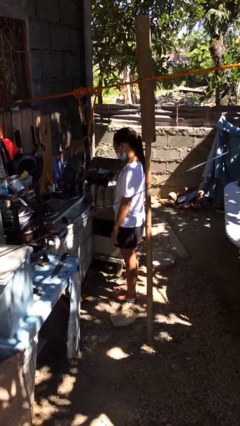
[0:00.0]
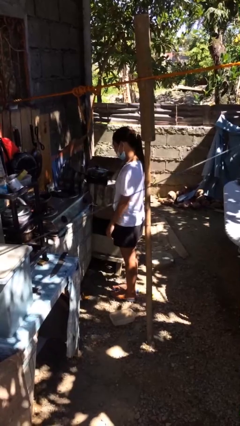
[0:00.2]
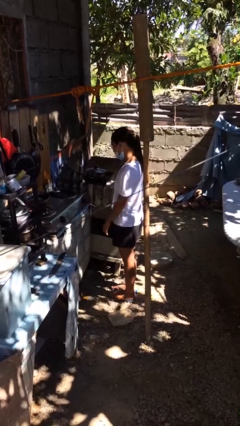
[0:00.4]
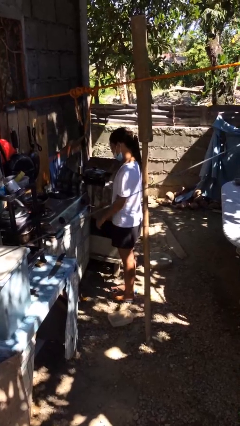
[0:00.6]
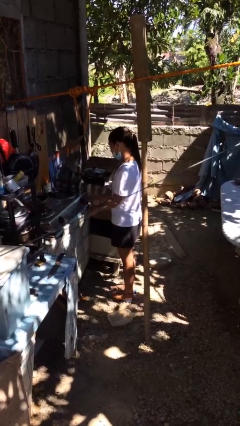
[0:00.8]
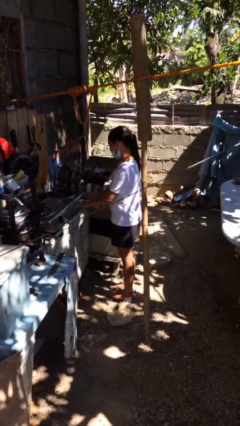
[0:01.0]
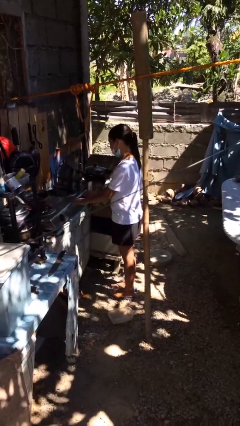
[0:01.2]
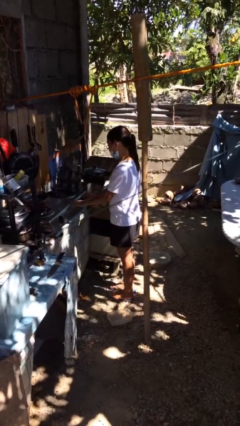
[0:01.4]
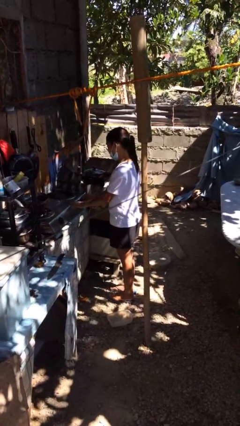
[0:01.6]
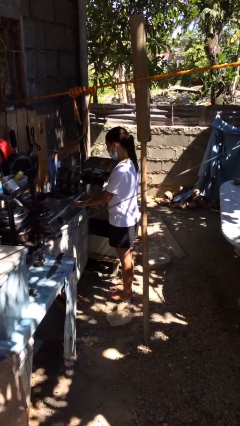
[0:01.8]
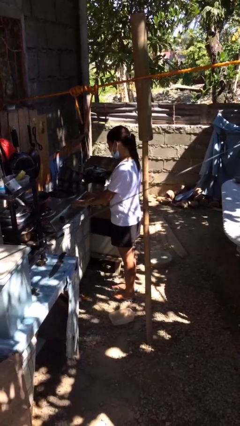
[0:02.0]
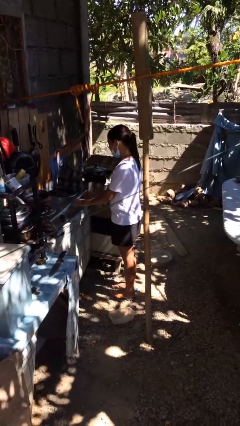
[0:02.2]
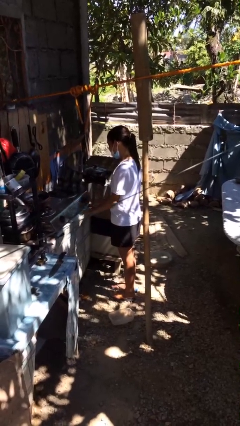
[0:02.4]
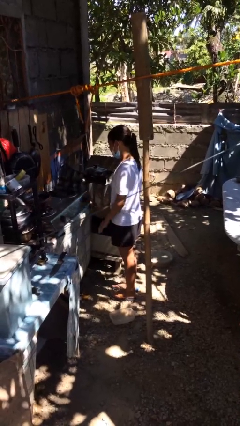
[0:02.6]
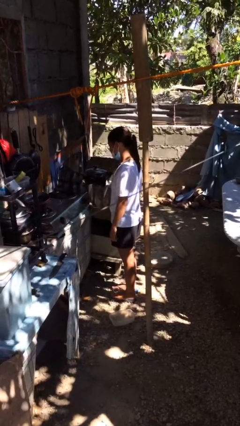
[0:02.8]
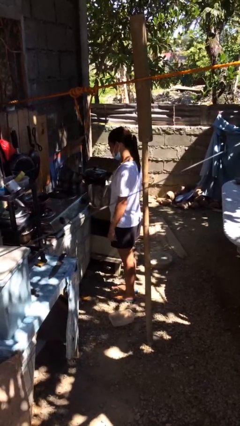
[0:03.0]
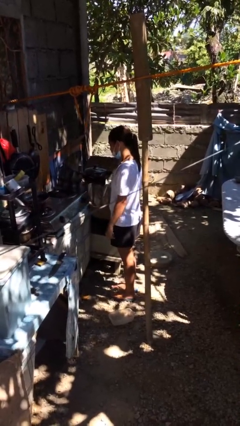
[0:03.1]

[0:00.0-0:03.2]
person turns off stovetop

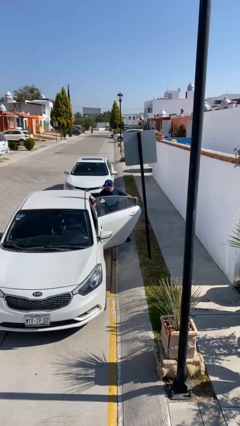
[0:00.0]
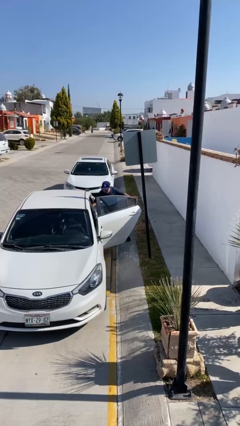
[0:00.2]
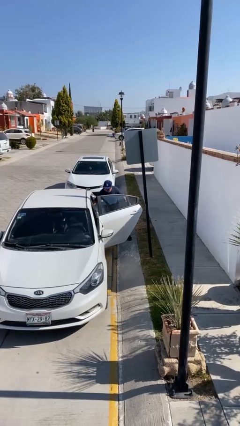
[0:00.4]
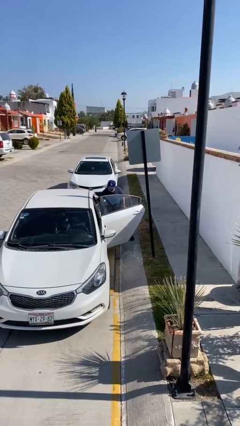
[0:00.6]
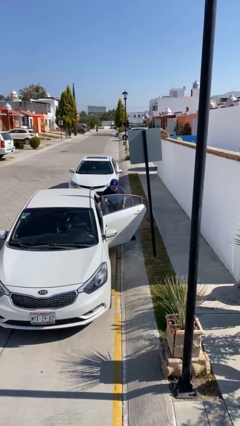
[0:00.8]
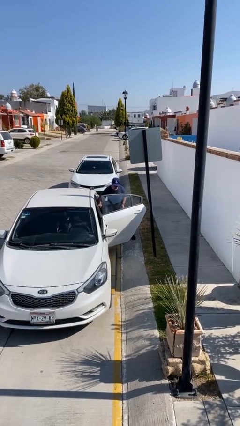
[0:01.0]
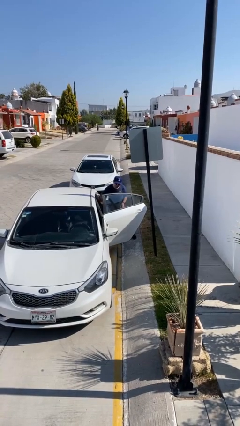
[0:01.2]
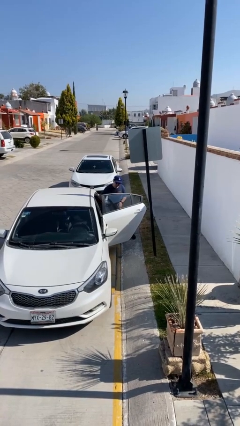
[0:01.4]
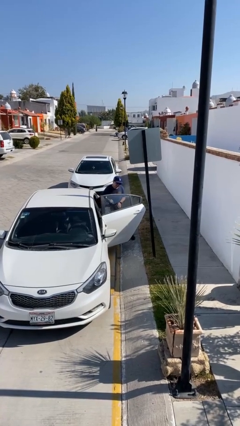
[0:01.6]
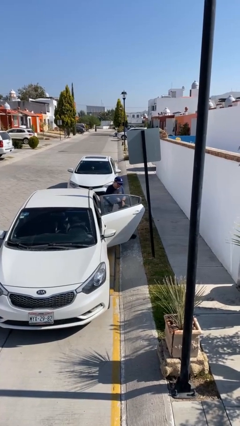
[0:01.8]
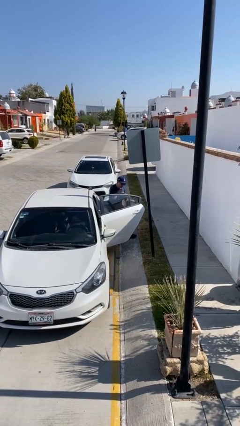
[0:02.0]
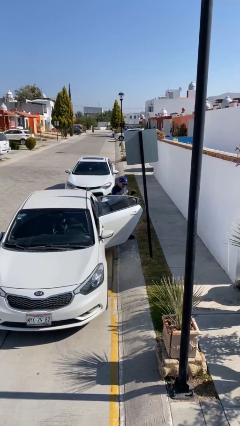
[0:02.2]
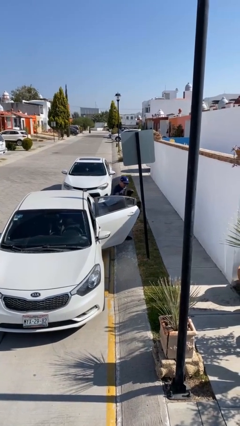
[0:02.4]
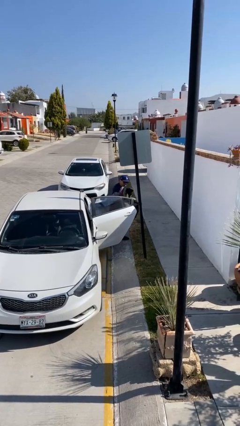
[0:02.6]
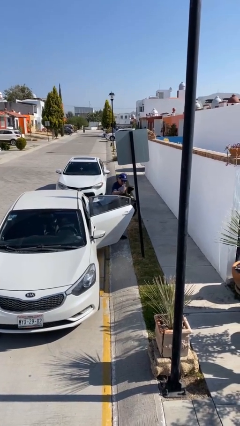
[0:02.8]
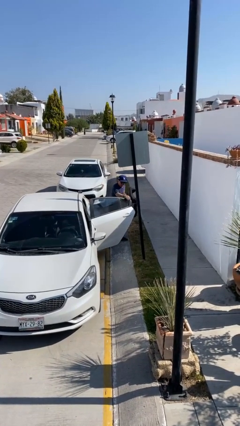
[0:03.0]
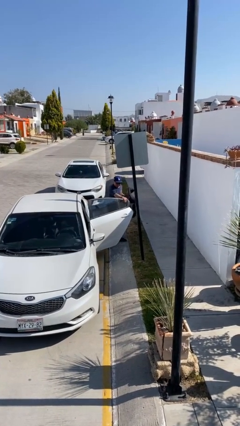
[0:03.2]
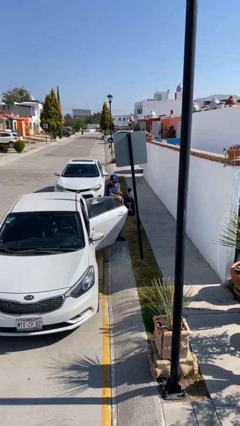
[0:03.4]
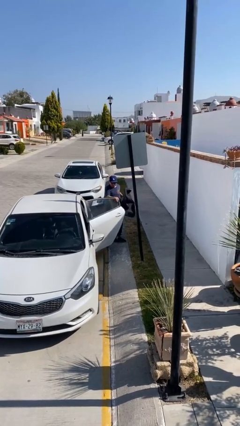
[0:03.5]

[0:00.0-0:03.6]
person unloads car

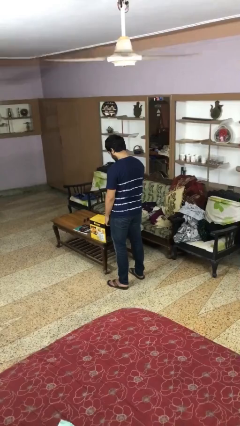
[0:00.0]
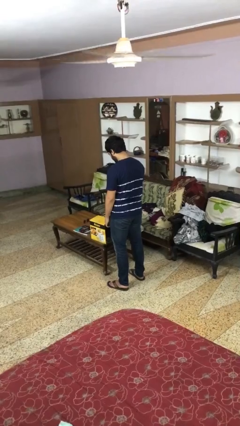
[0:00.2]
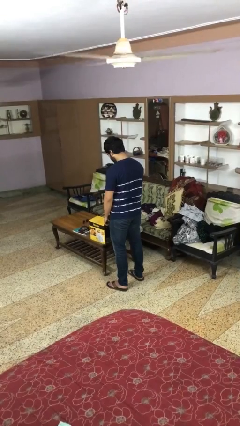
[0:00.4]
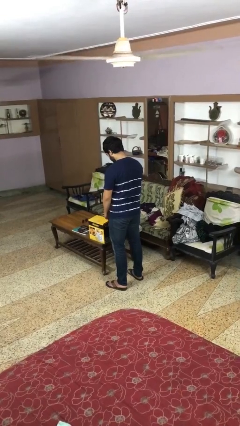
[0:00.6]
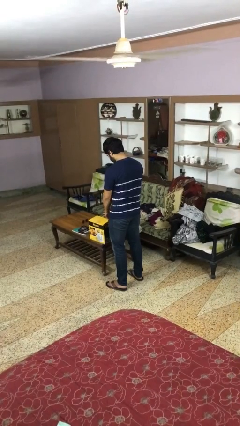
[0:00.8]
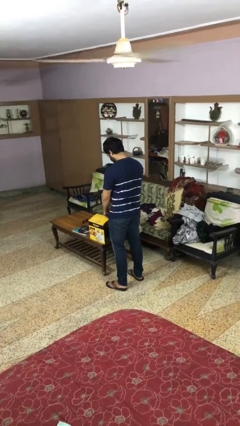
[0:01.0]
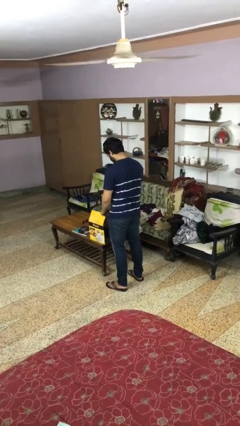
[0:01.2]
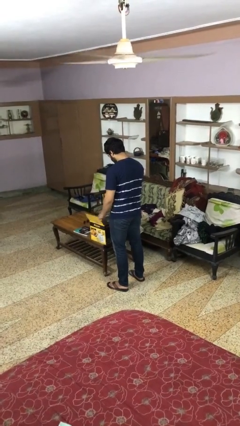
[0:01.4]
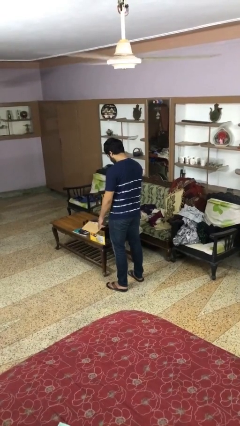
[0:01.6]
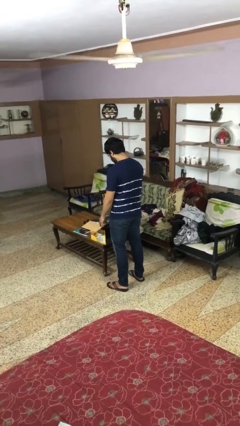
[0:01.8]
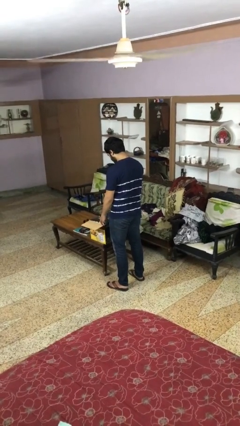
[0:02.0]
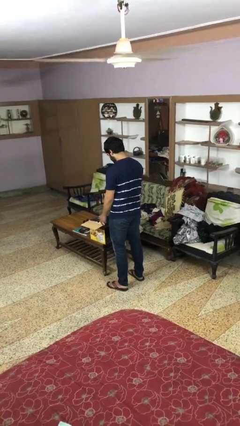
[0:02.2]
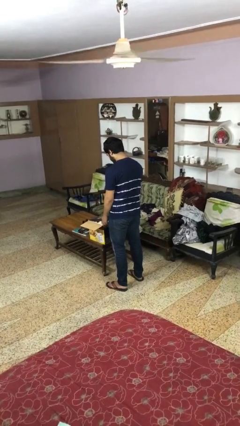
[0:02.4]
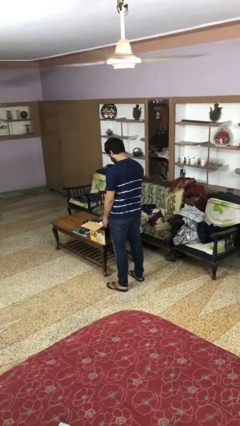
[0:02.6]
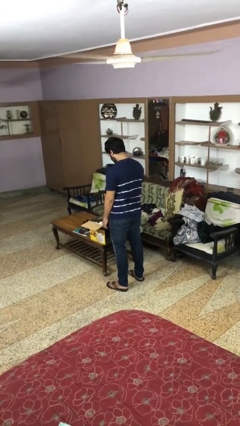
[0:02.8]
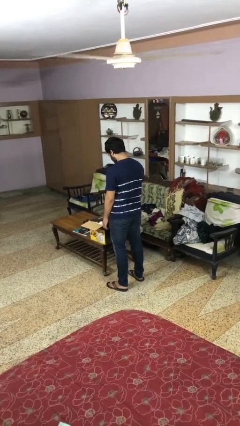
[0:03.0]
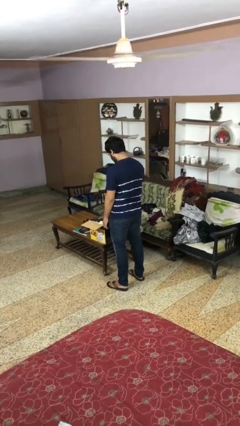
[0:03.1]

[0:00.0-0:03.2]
person opens box

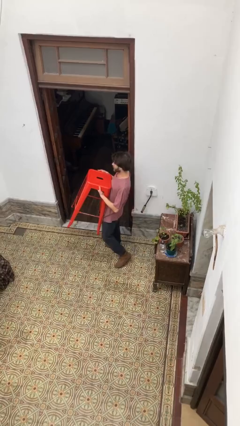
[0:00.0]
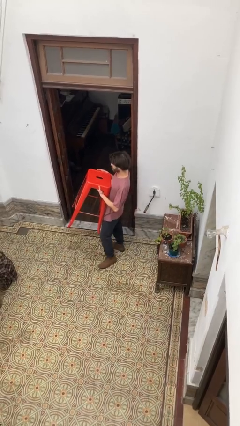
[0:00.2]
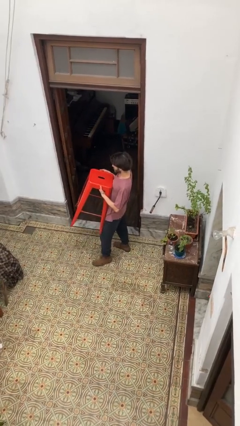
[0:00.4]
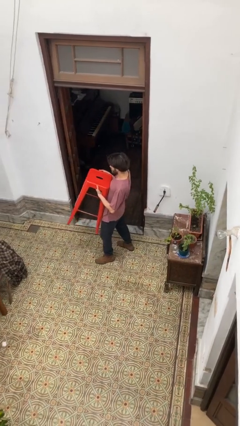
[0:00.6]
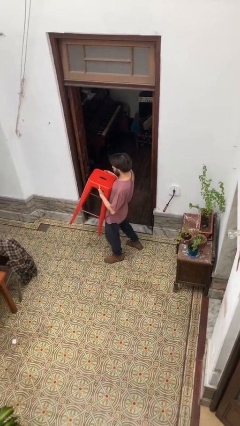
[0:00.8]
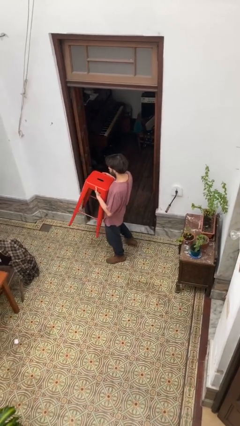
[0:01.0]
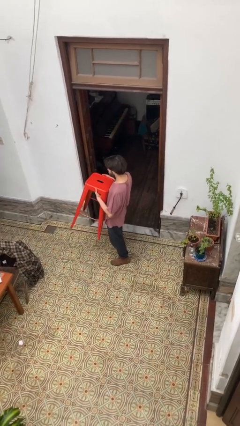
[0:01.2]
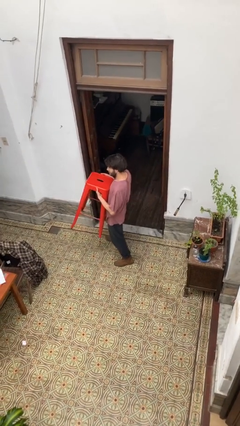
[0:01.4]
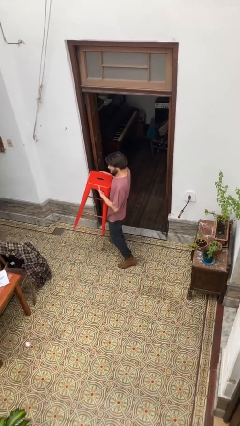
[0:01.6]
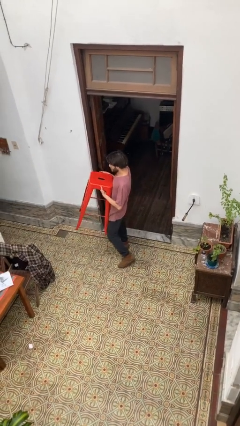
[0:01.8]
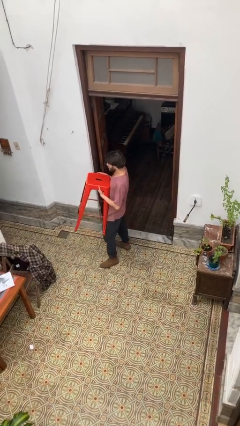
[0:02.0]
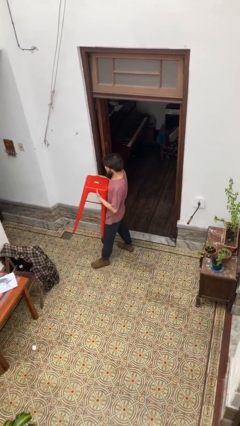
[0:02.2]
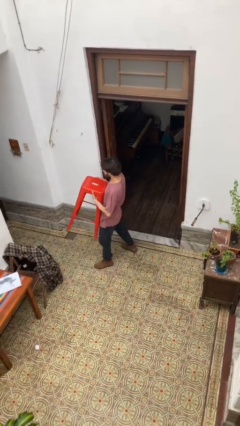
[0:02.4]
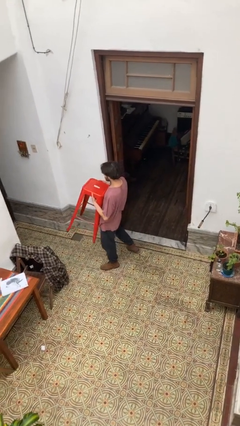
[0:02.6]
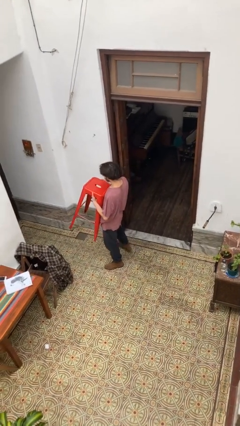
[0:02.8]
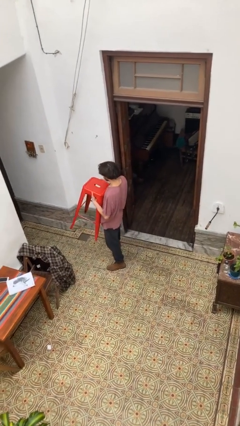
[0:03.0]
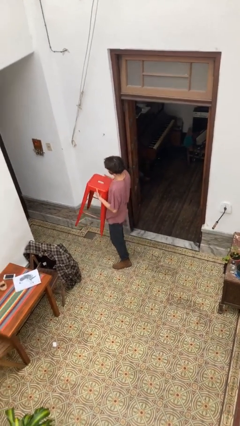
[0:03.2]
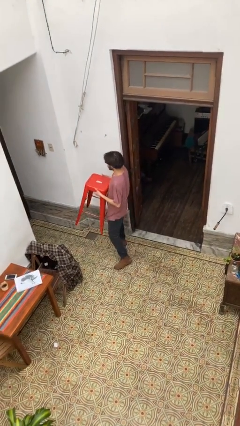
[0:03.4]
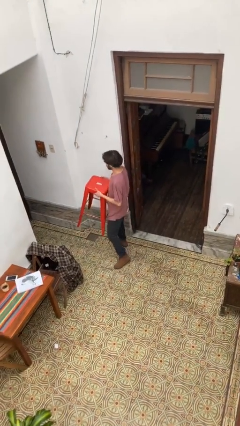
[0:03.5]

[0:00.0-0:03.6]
person carries heavy object

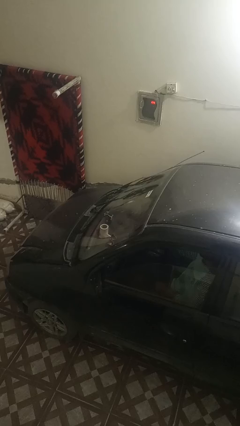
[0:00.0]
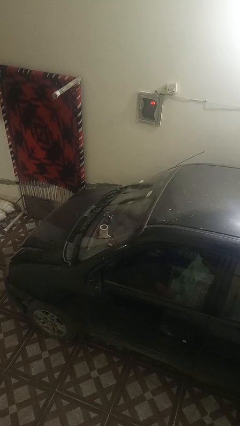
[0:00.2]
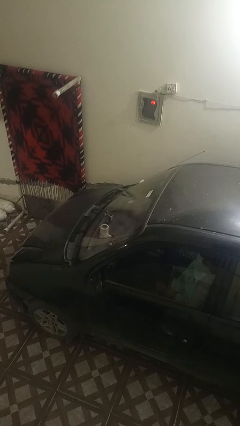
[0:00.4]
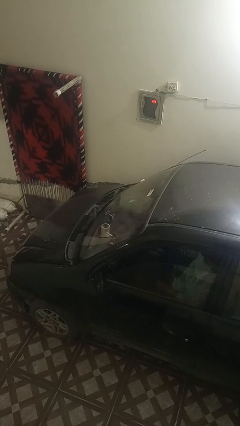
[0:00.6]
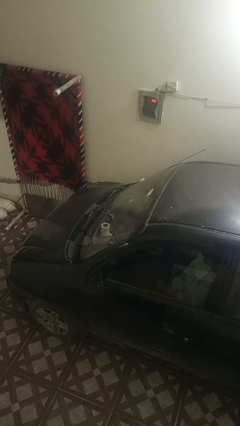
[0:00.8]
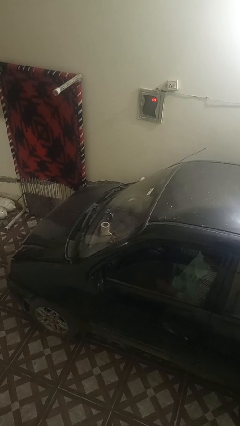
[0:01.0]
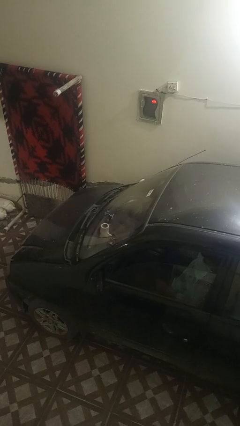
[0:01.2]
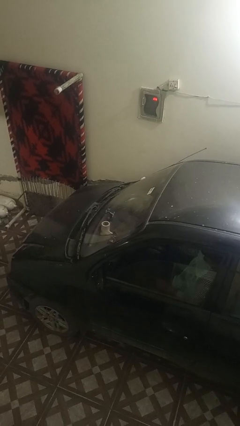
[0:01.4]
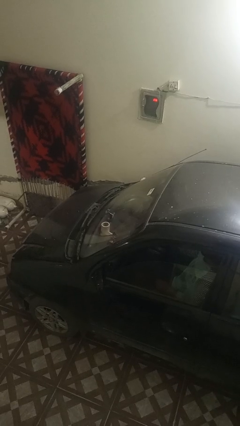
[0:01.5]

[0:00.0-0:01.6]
person flips down car wipers

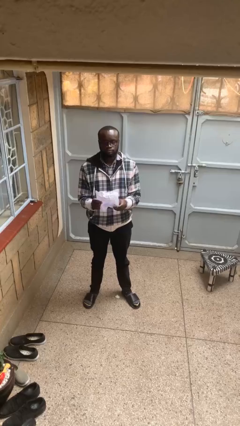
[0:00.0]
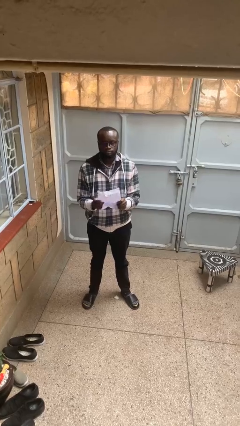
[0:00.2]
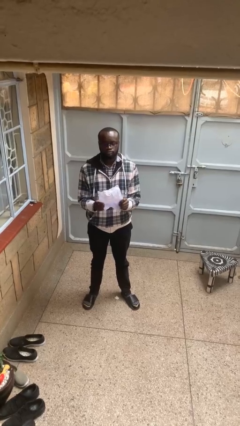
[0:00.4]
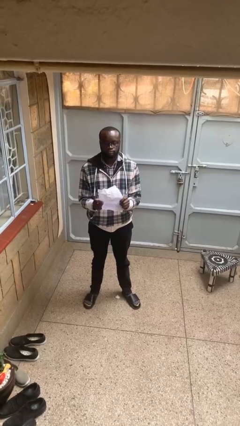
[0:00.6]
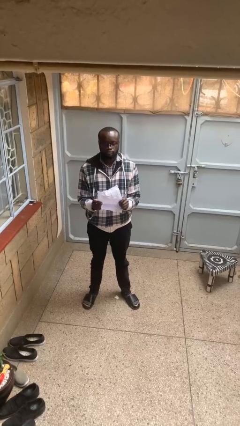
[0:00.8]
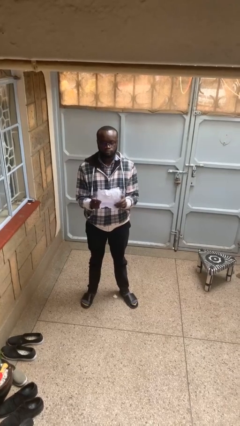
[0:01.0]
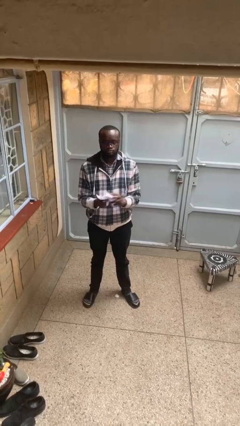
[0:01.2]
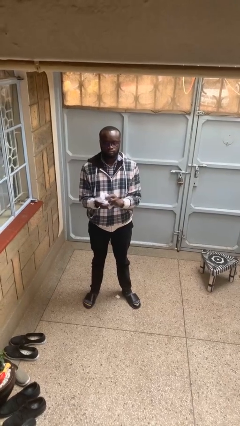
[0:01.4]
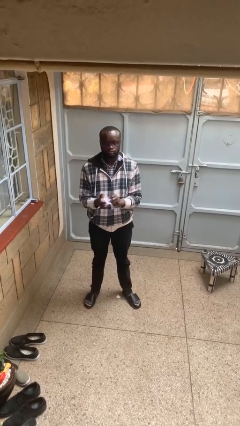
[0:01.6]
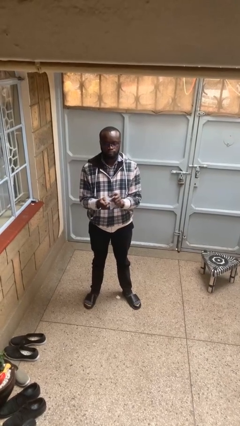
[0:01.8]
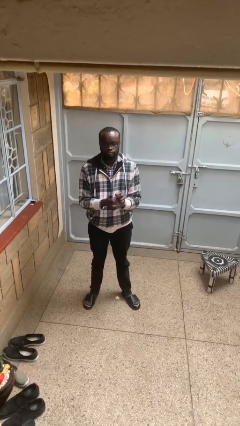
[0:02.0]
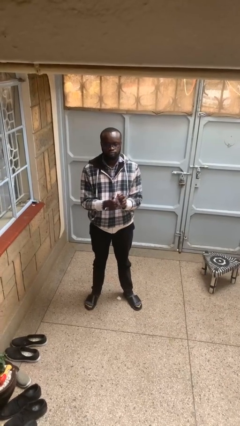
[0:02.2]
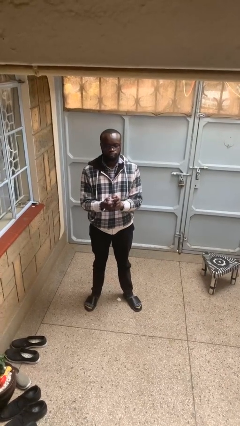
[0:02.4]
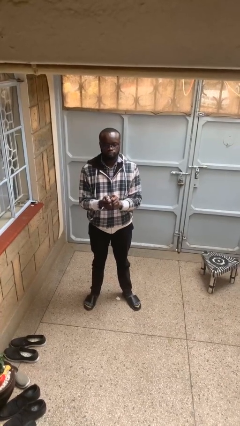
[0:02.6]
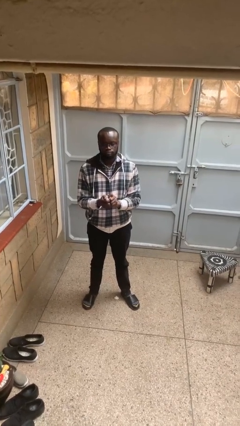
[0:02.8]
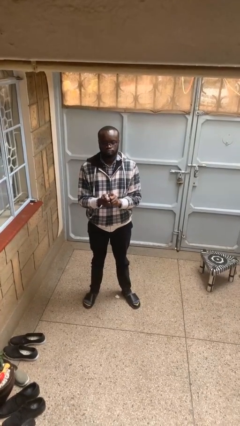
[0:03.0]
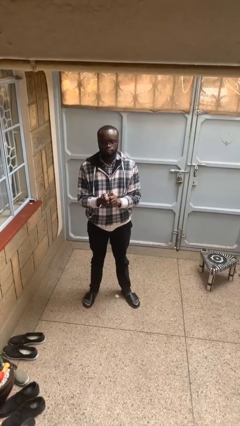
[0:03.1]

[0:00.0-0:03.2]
person crumples paper
